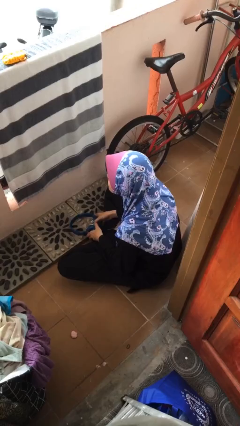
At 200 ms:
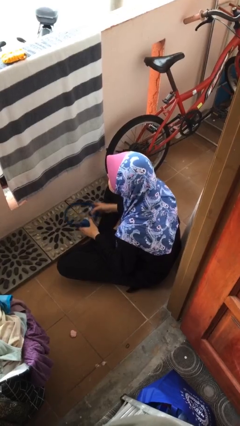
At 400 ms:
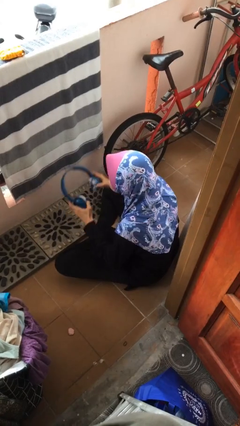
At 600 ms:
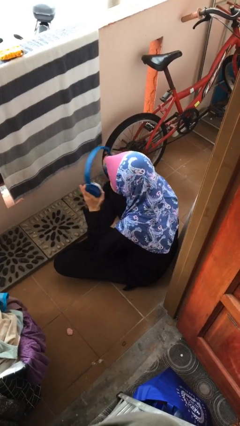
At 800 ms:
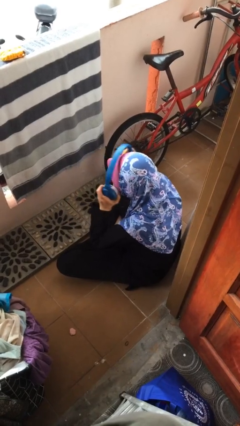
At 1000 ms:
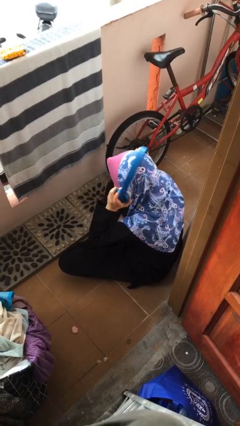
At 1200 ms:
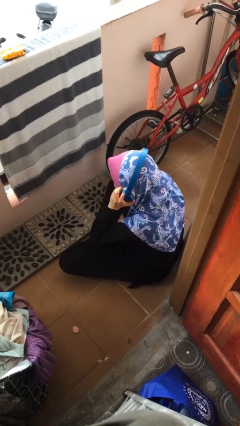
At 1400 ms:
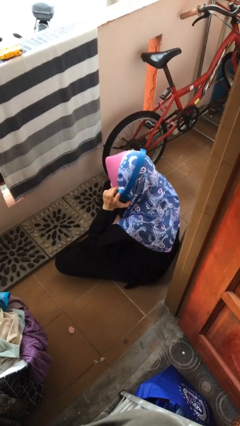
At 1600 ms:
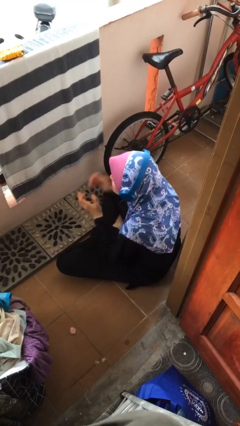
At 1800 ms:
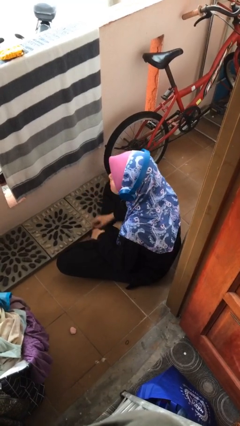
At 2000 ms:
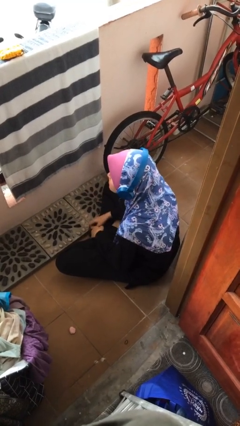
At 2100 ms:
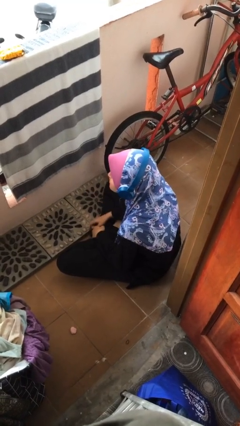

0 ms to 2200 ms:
person puts on headphones

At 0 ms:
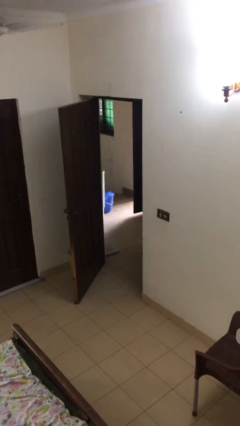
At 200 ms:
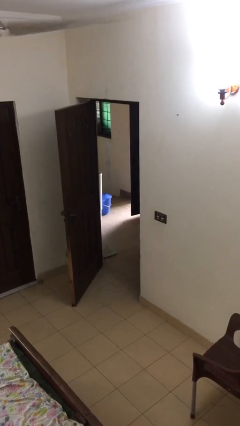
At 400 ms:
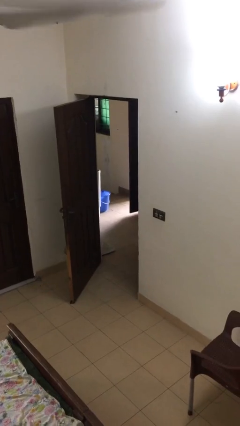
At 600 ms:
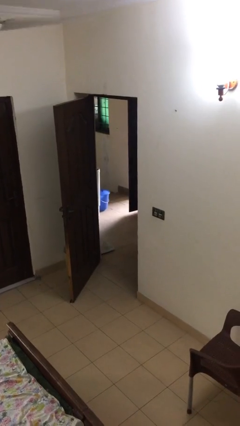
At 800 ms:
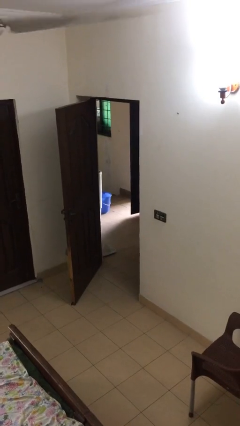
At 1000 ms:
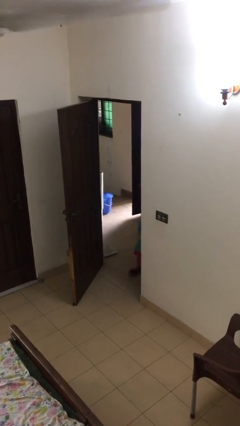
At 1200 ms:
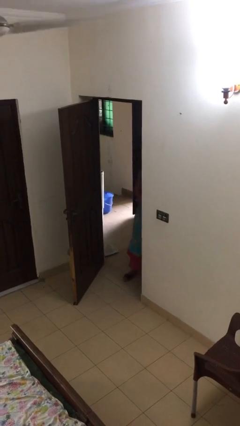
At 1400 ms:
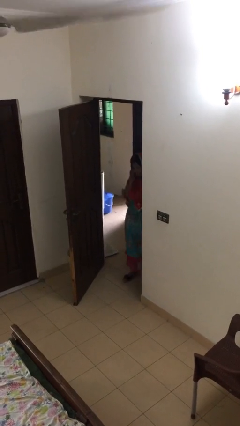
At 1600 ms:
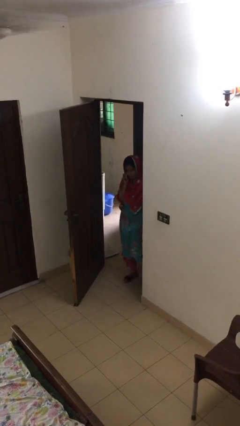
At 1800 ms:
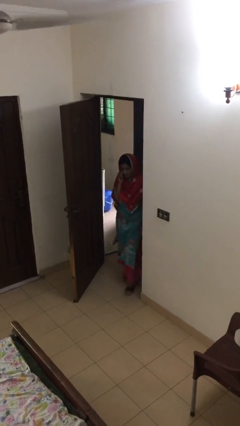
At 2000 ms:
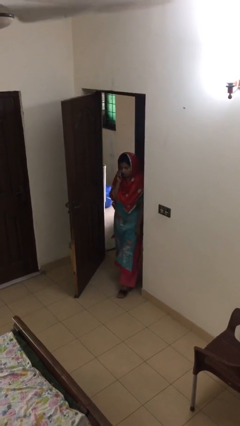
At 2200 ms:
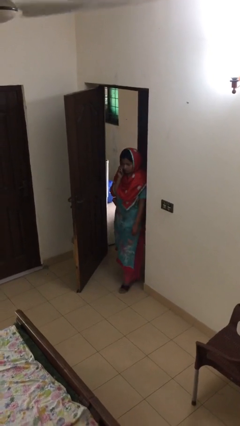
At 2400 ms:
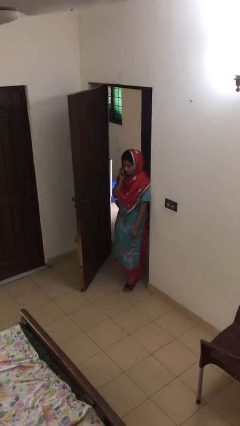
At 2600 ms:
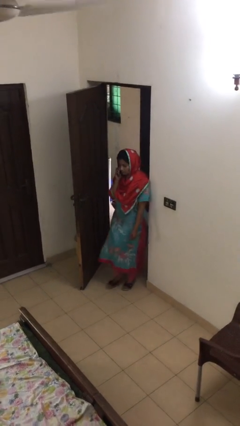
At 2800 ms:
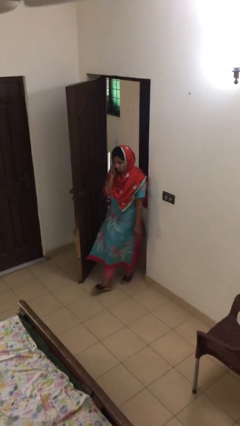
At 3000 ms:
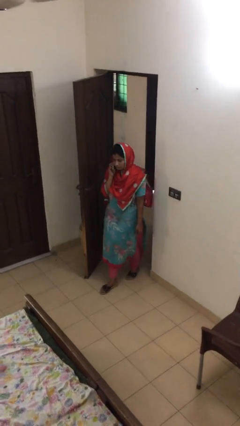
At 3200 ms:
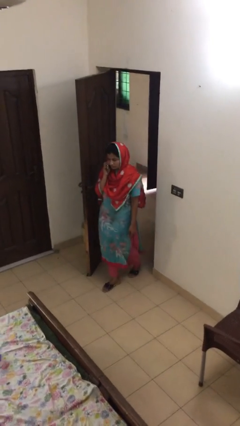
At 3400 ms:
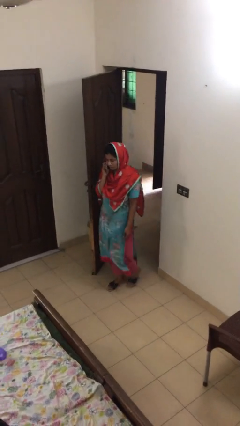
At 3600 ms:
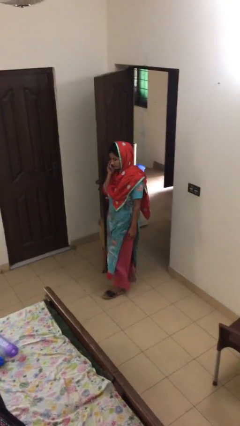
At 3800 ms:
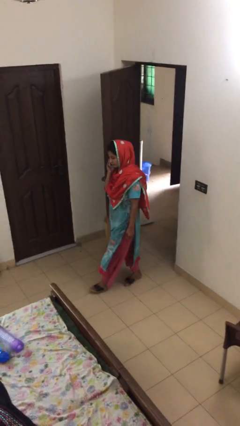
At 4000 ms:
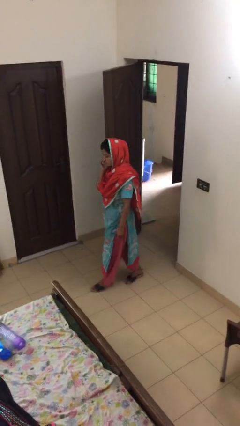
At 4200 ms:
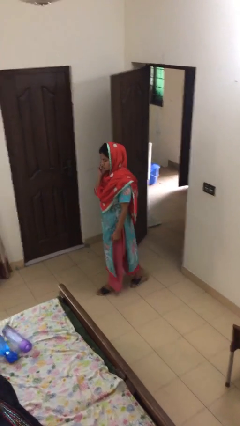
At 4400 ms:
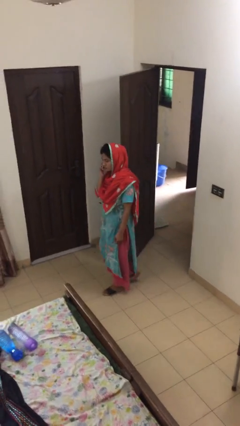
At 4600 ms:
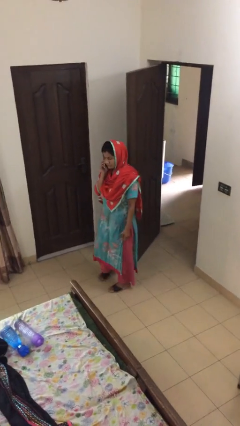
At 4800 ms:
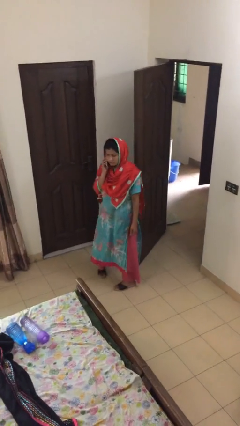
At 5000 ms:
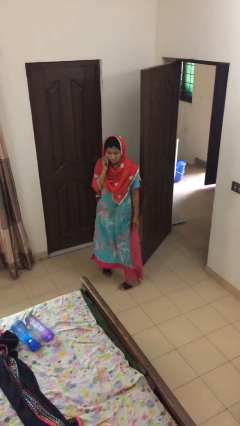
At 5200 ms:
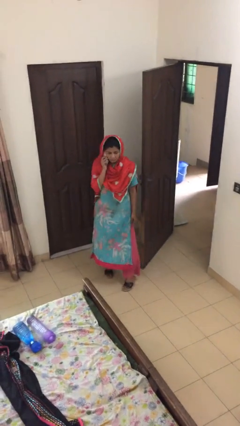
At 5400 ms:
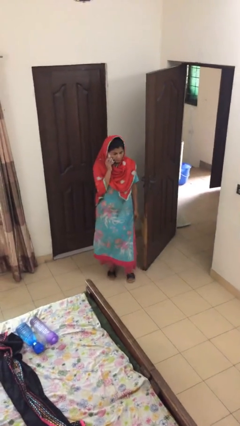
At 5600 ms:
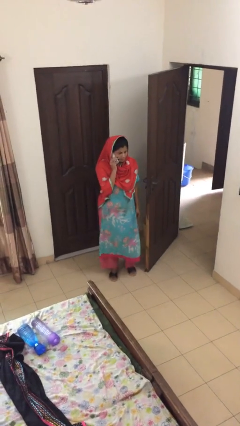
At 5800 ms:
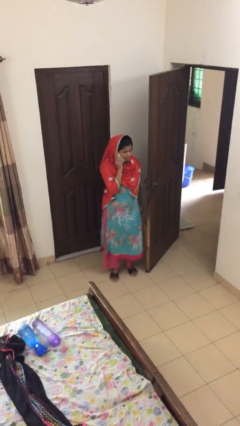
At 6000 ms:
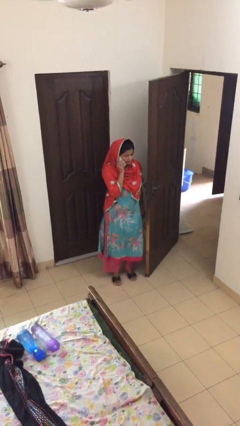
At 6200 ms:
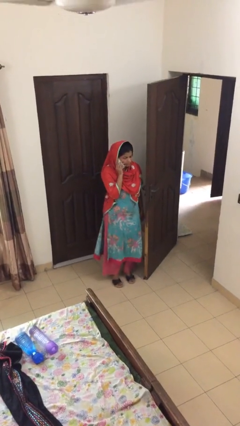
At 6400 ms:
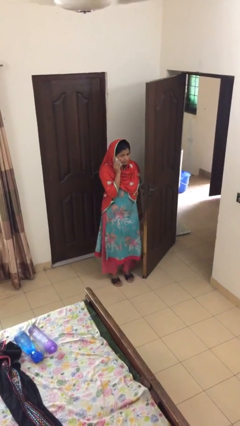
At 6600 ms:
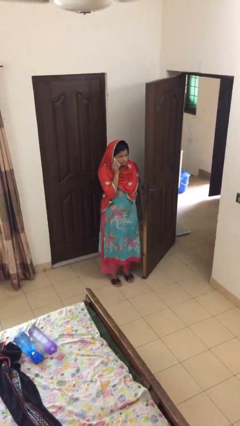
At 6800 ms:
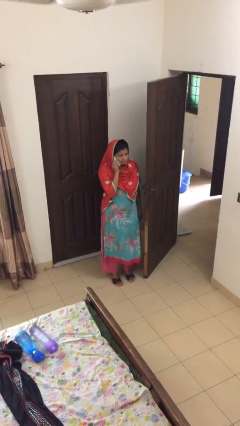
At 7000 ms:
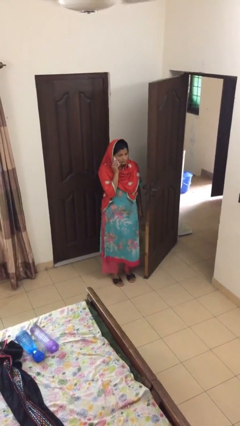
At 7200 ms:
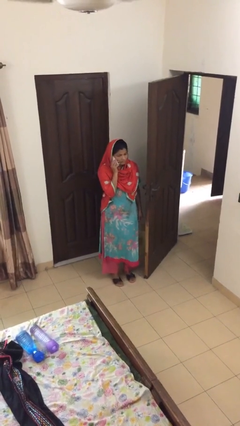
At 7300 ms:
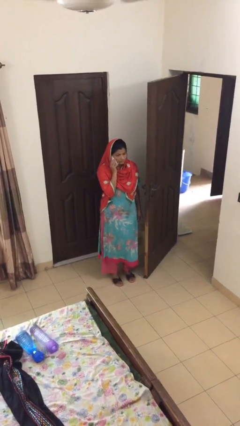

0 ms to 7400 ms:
person enters scene through structure

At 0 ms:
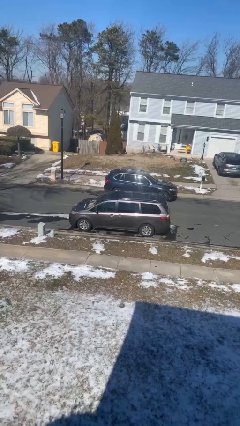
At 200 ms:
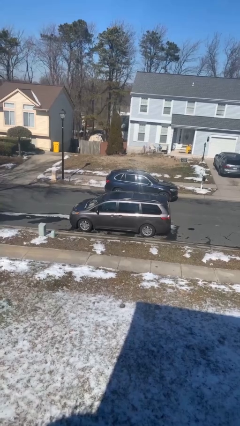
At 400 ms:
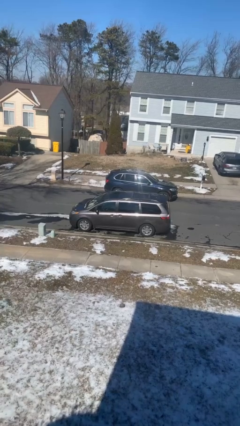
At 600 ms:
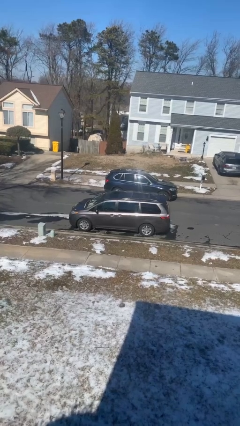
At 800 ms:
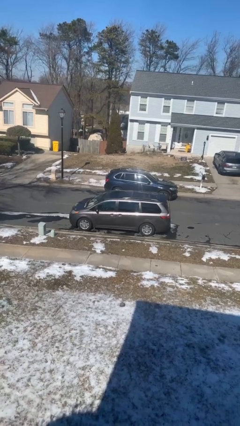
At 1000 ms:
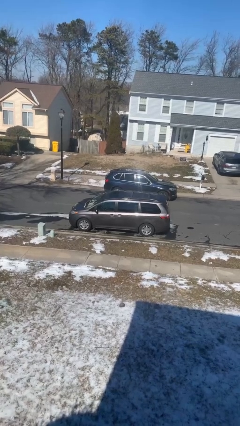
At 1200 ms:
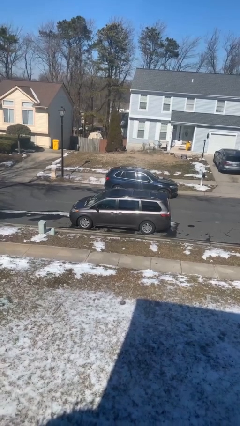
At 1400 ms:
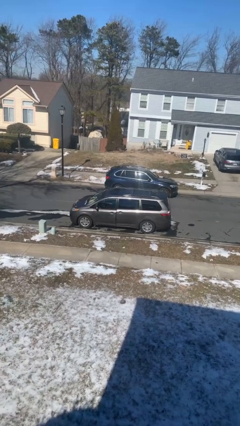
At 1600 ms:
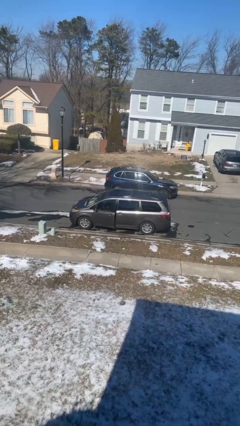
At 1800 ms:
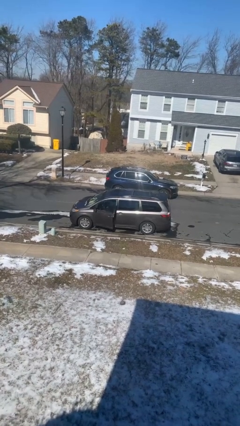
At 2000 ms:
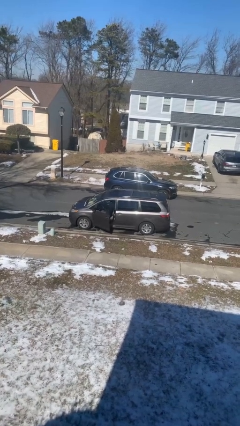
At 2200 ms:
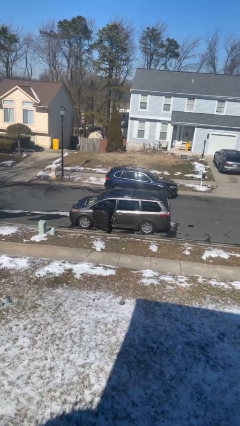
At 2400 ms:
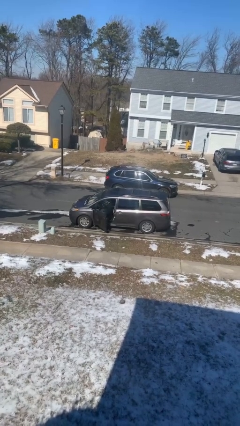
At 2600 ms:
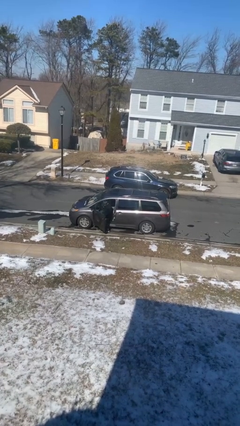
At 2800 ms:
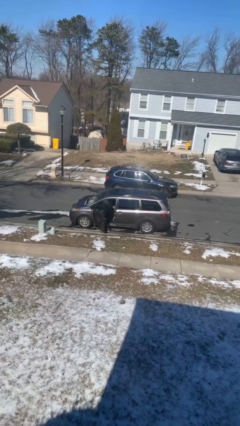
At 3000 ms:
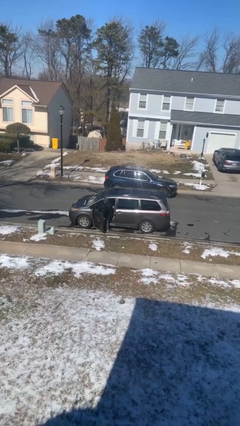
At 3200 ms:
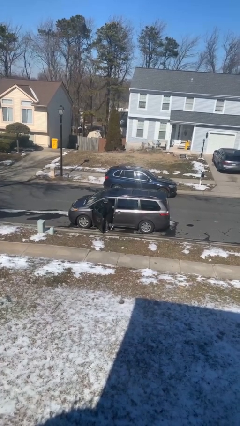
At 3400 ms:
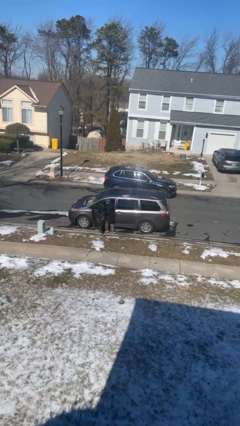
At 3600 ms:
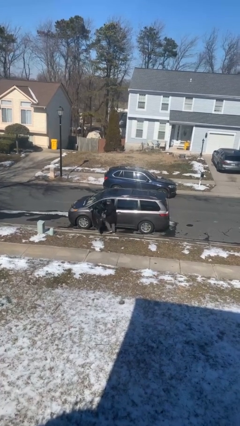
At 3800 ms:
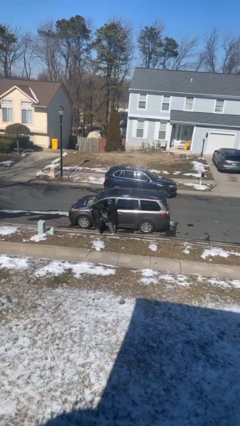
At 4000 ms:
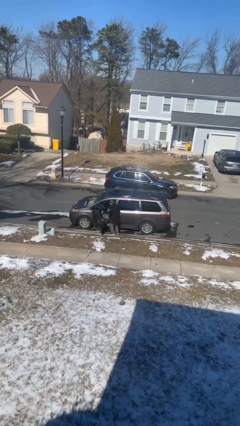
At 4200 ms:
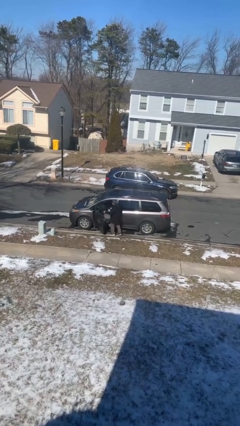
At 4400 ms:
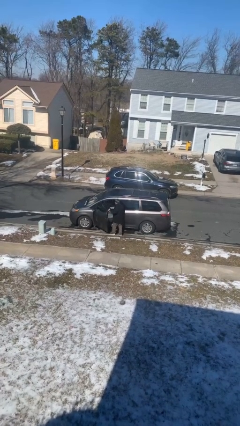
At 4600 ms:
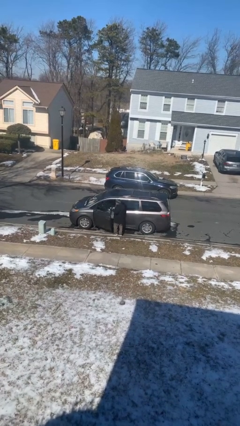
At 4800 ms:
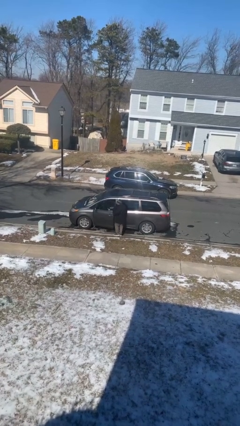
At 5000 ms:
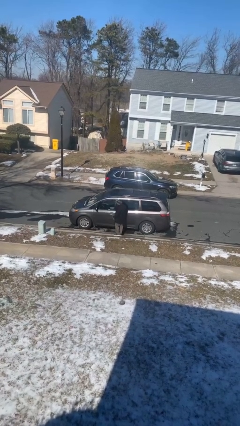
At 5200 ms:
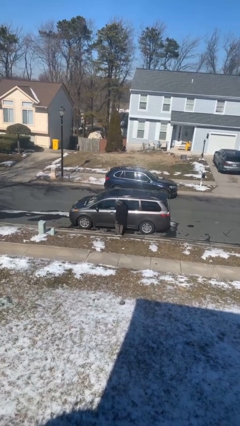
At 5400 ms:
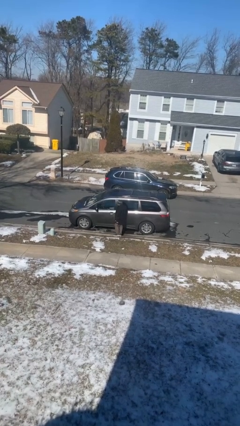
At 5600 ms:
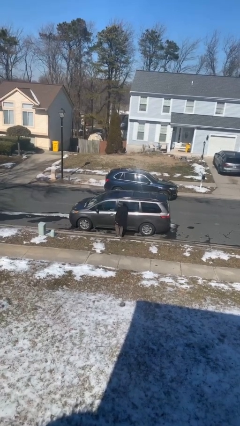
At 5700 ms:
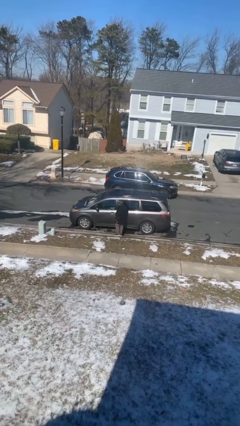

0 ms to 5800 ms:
car drops off person

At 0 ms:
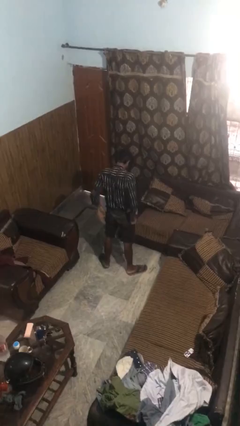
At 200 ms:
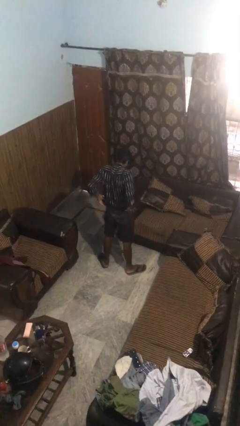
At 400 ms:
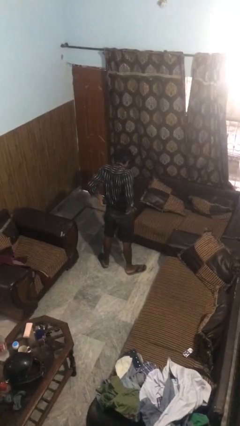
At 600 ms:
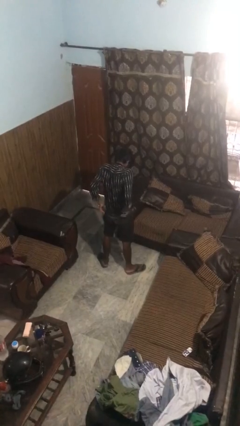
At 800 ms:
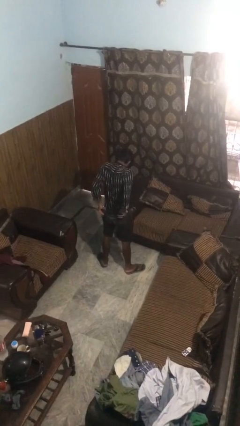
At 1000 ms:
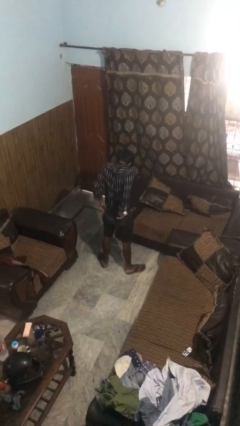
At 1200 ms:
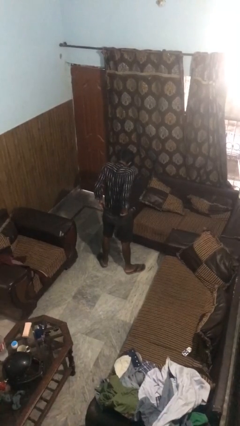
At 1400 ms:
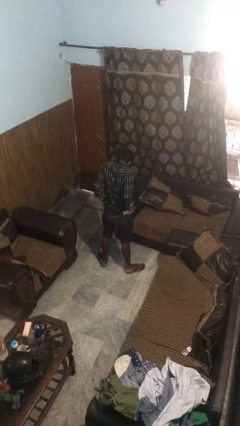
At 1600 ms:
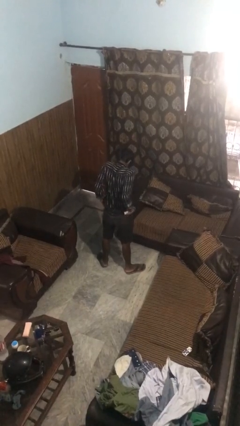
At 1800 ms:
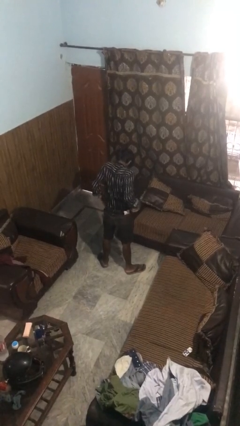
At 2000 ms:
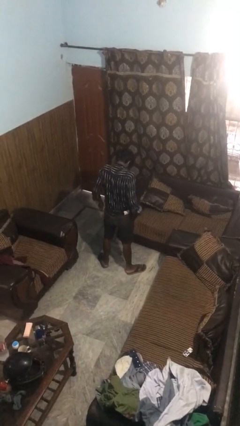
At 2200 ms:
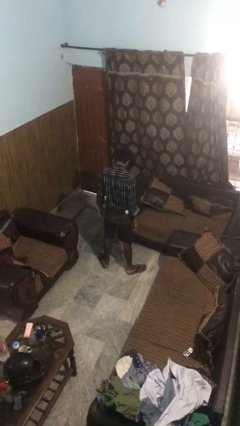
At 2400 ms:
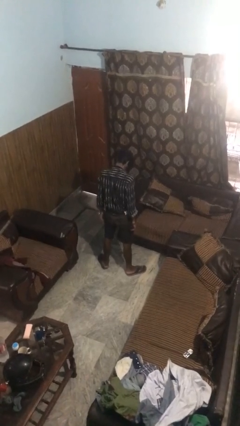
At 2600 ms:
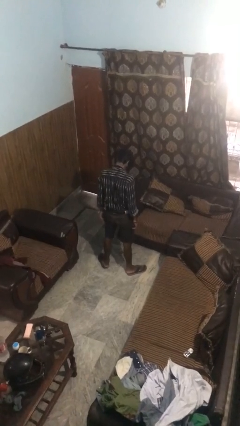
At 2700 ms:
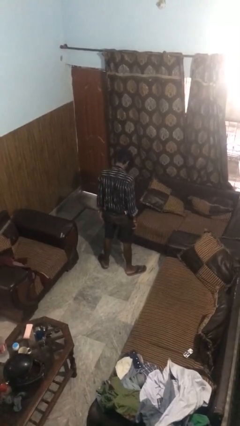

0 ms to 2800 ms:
person hikes up pants
